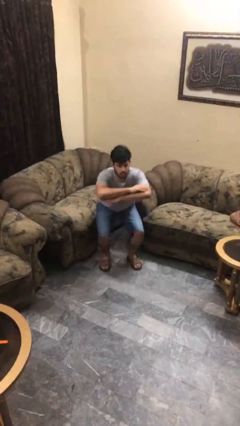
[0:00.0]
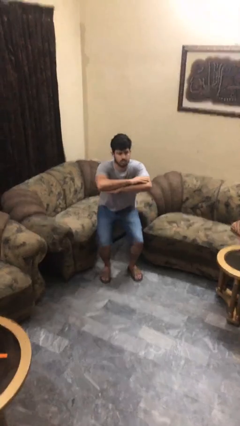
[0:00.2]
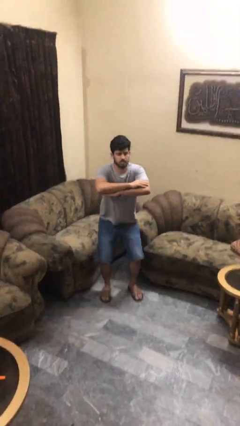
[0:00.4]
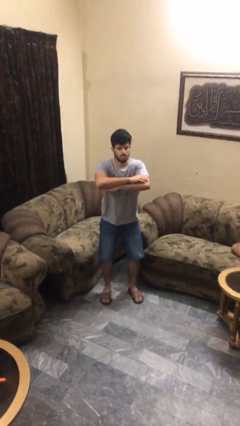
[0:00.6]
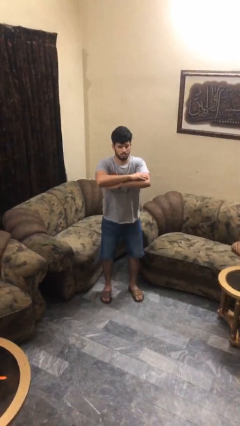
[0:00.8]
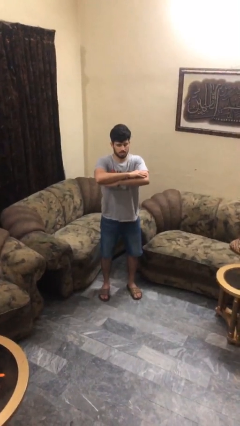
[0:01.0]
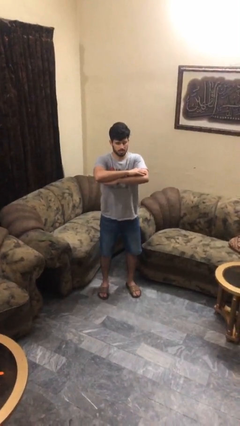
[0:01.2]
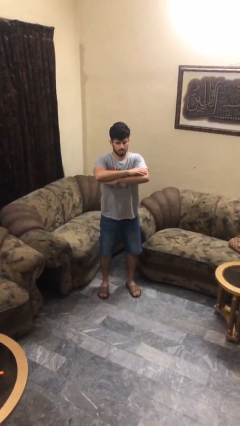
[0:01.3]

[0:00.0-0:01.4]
person stands up

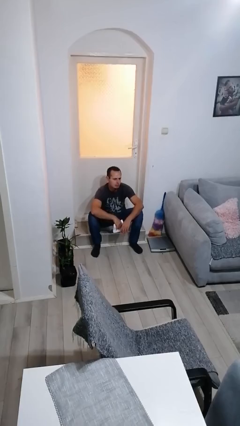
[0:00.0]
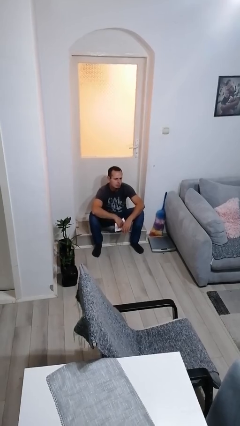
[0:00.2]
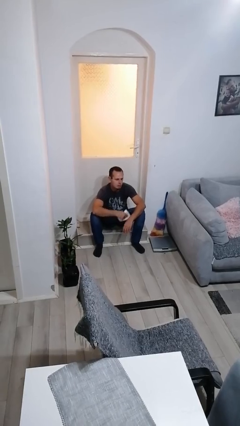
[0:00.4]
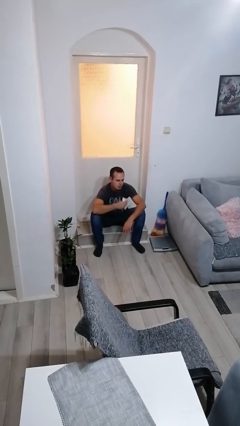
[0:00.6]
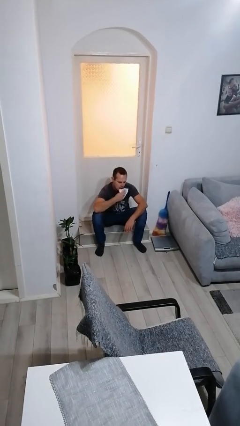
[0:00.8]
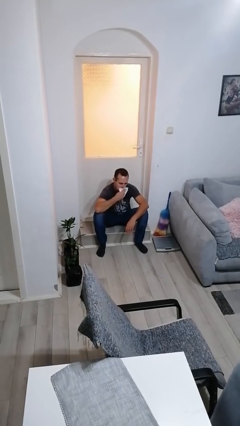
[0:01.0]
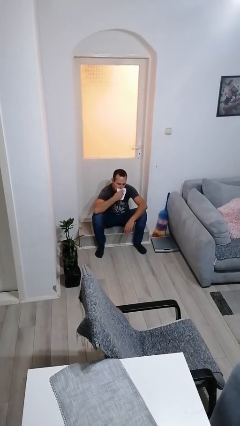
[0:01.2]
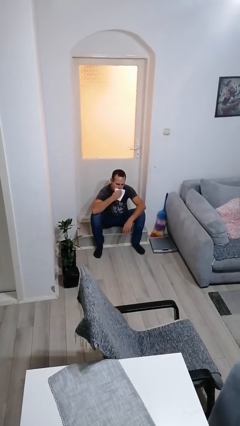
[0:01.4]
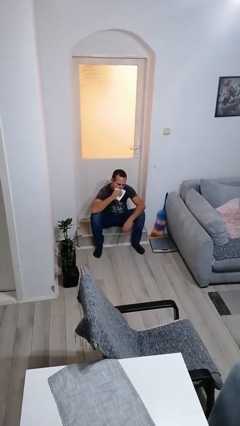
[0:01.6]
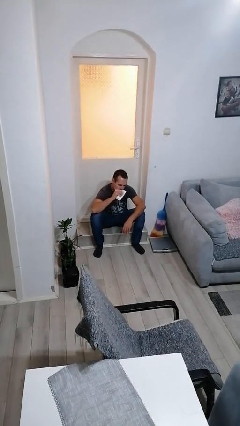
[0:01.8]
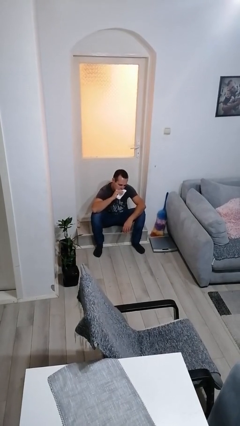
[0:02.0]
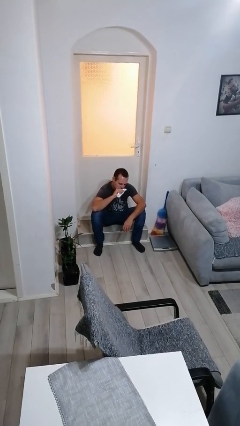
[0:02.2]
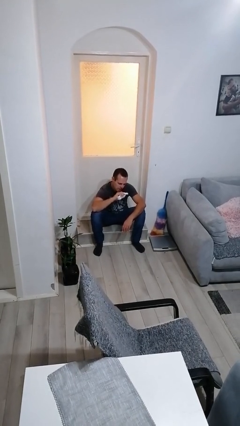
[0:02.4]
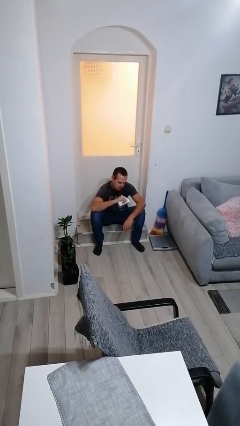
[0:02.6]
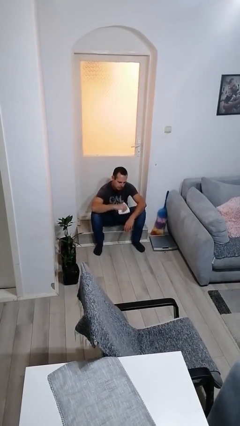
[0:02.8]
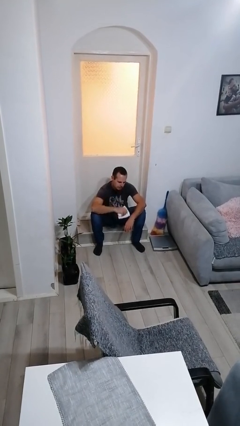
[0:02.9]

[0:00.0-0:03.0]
person wipes mouth with napkin

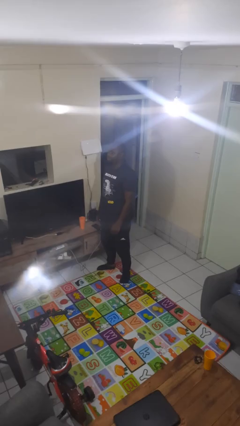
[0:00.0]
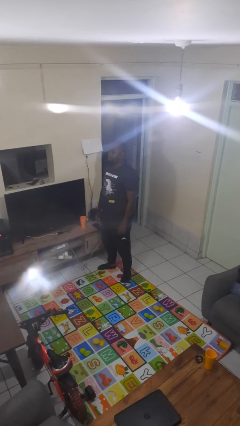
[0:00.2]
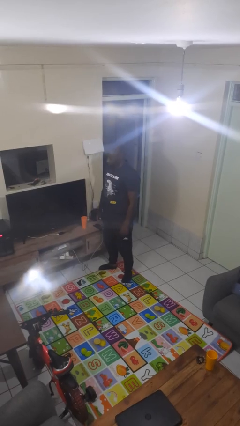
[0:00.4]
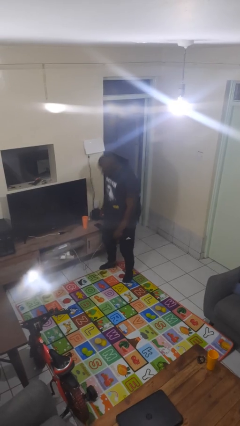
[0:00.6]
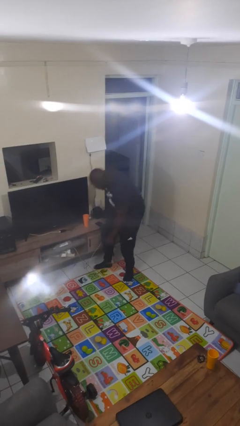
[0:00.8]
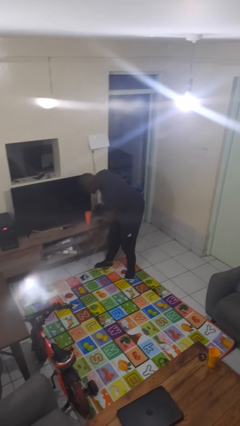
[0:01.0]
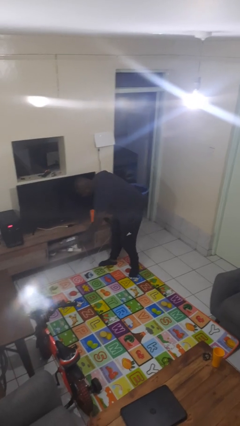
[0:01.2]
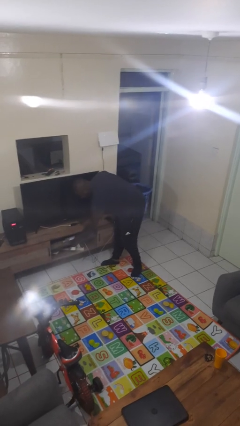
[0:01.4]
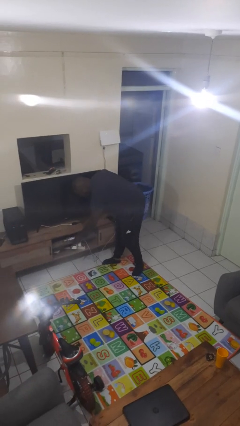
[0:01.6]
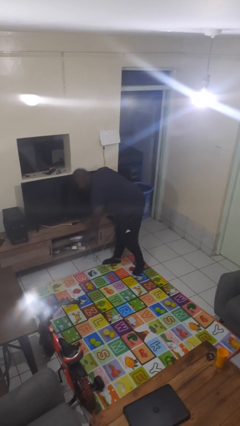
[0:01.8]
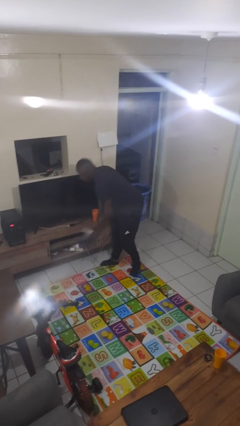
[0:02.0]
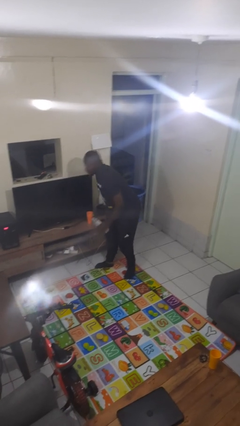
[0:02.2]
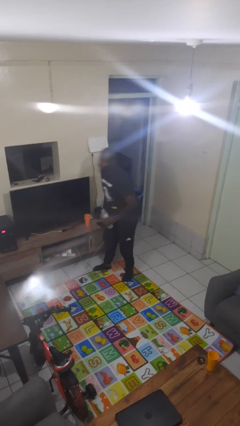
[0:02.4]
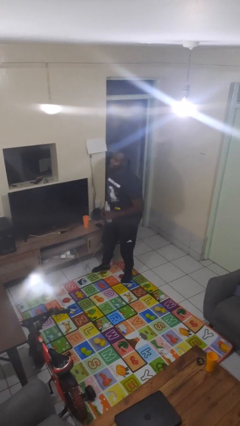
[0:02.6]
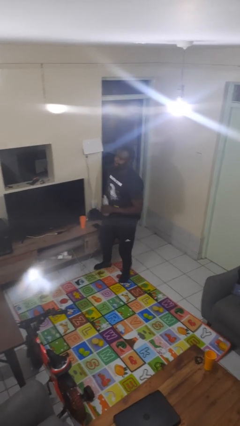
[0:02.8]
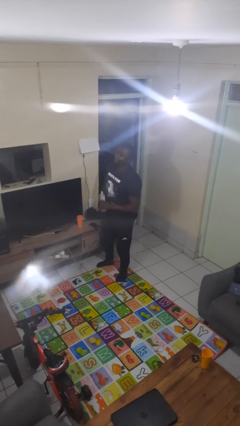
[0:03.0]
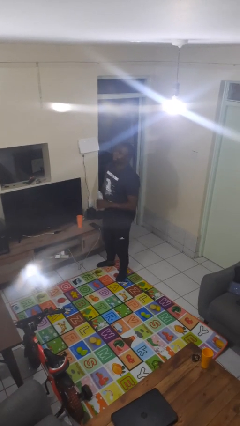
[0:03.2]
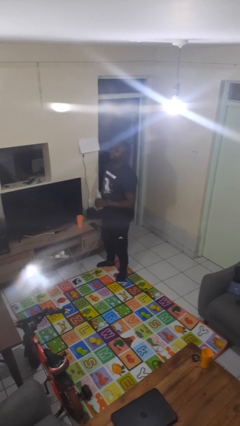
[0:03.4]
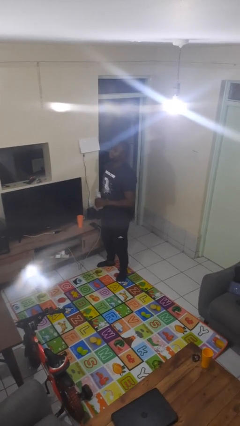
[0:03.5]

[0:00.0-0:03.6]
person picks up object from cabinet

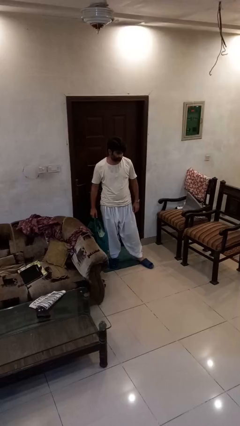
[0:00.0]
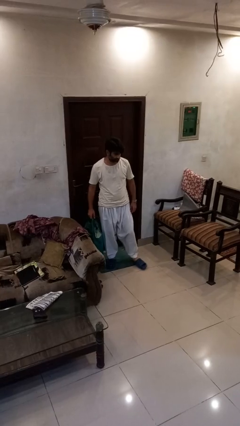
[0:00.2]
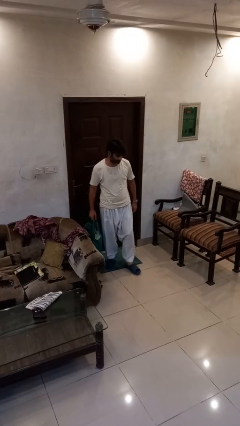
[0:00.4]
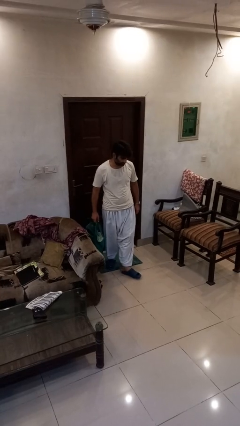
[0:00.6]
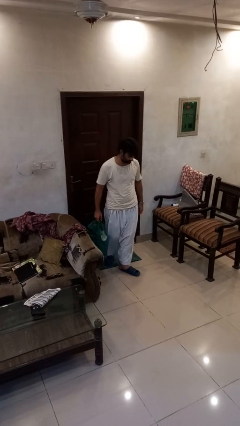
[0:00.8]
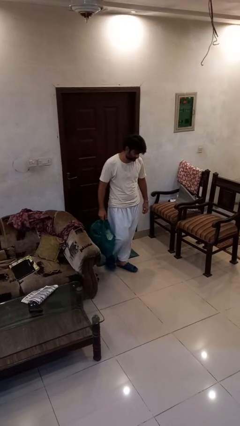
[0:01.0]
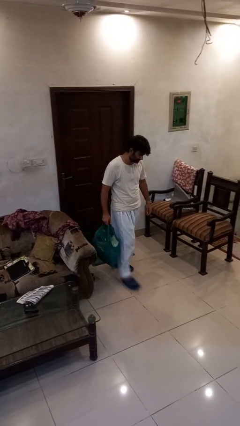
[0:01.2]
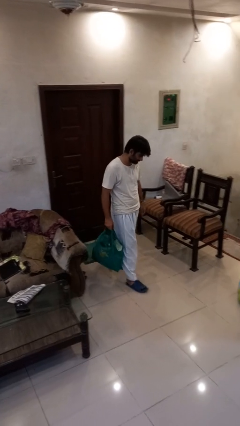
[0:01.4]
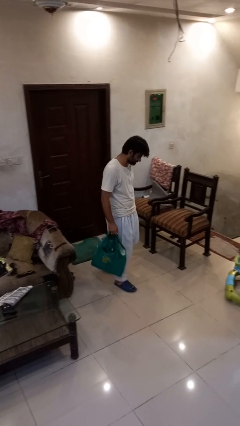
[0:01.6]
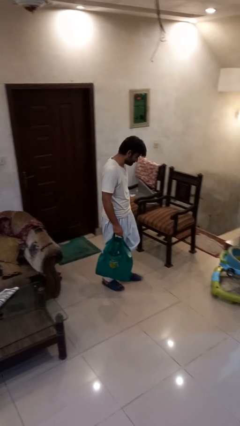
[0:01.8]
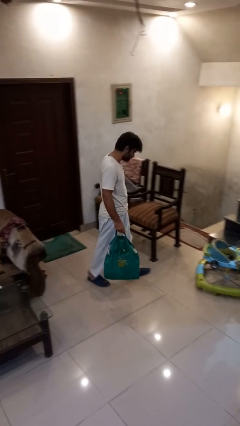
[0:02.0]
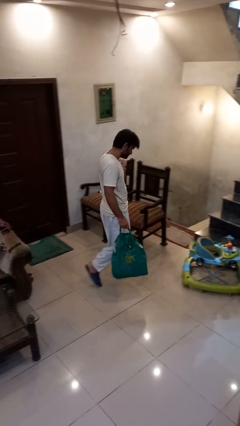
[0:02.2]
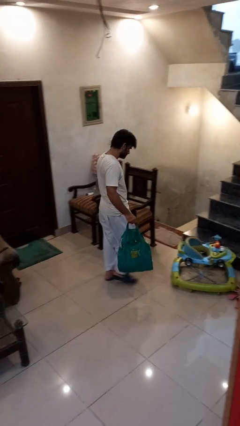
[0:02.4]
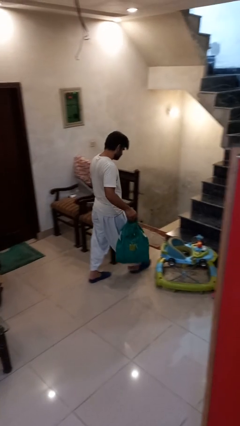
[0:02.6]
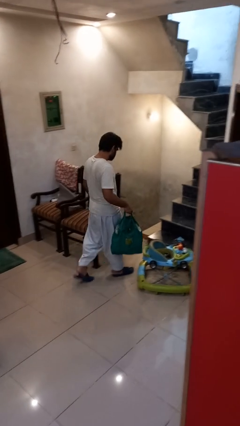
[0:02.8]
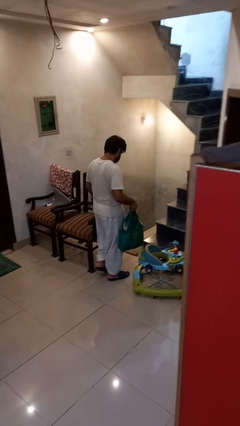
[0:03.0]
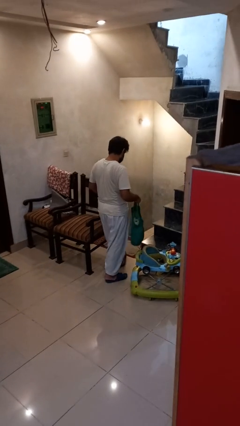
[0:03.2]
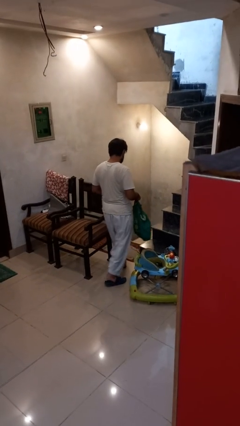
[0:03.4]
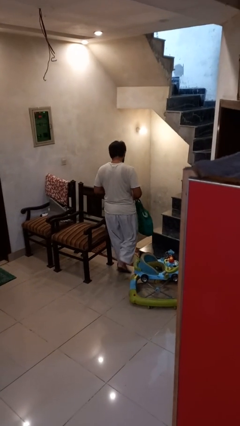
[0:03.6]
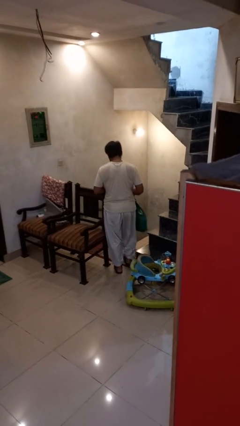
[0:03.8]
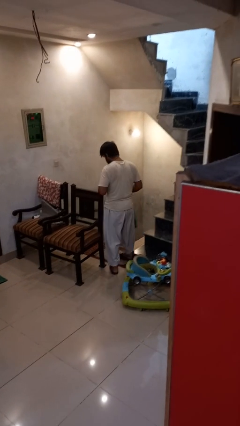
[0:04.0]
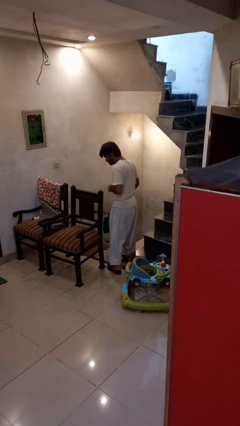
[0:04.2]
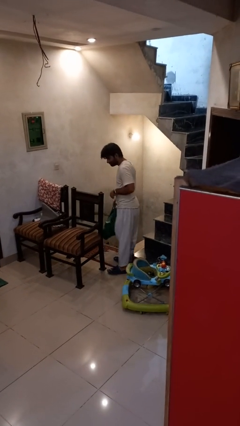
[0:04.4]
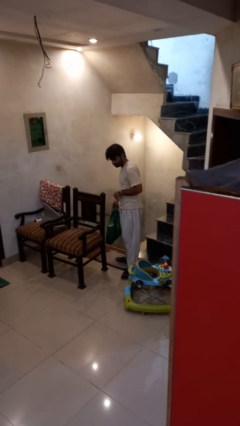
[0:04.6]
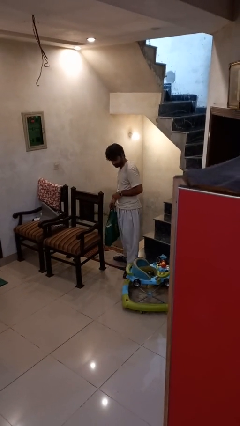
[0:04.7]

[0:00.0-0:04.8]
person carries groceries

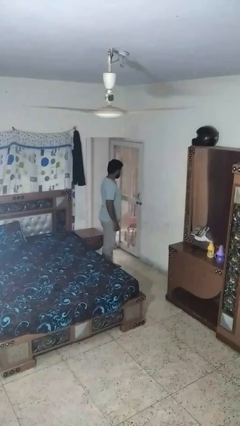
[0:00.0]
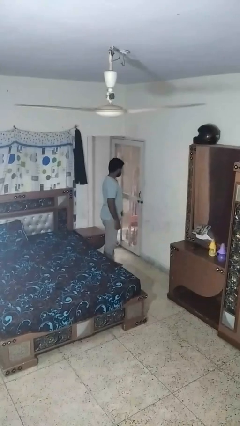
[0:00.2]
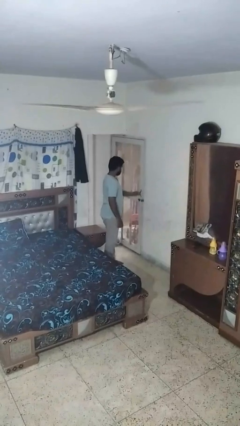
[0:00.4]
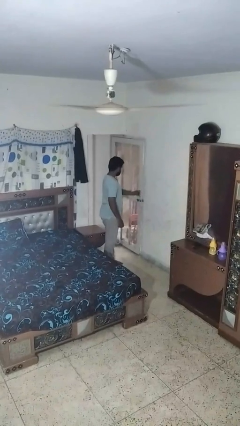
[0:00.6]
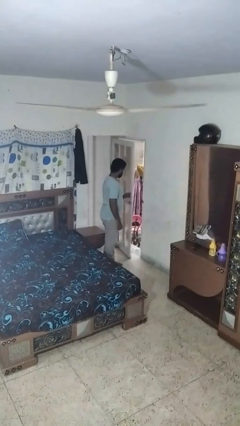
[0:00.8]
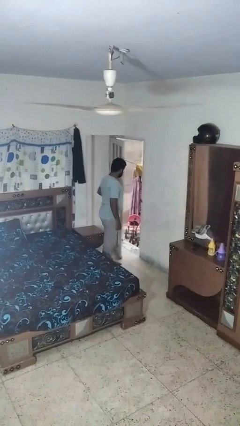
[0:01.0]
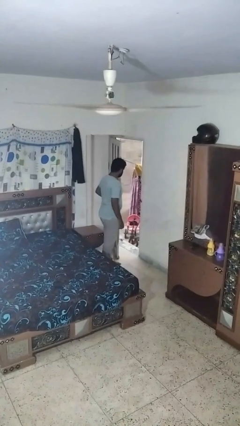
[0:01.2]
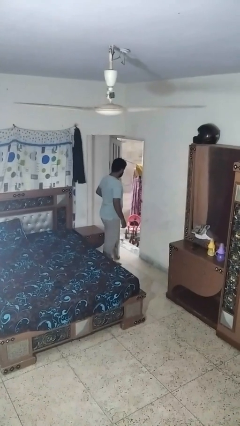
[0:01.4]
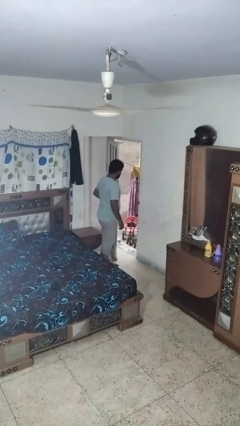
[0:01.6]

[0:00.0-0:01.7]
person opens facility door

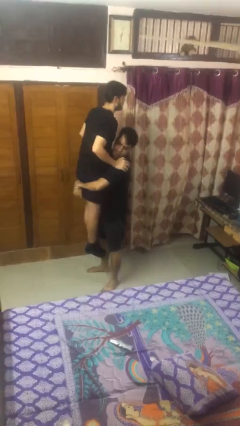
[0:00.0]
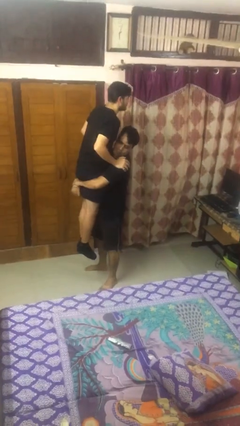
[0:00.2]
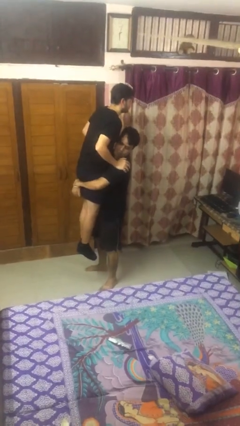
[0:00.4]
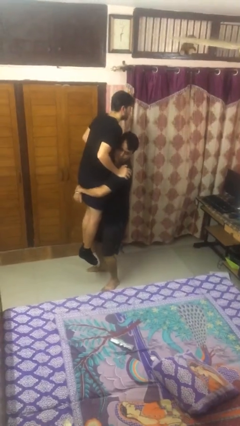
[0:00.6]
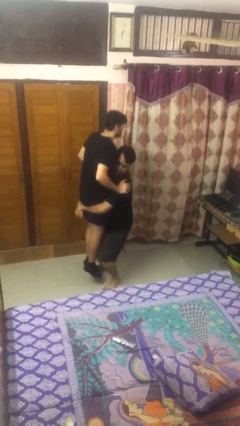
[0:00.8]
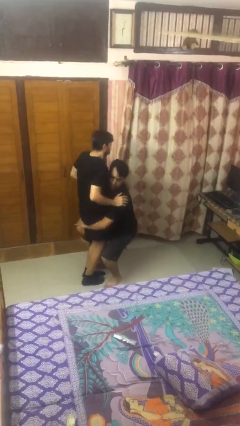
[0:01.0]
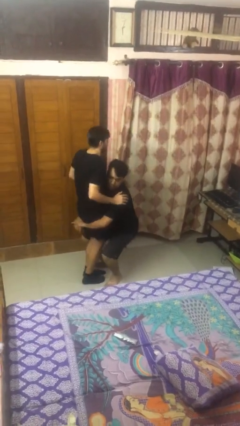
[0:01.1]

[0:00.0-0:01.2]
person puts down person

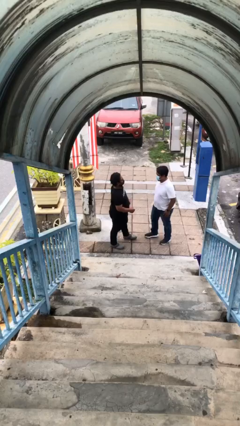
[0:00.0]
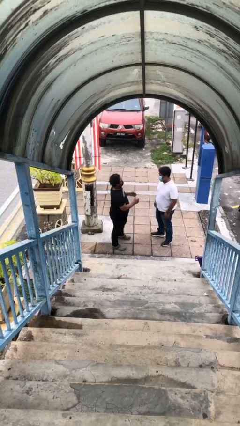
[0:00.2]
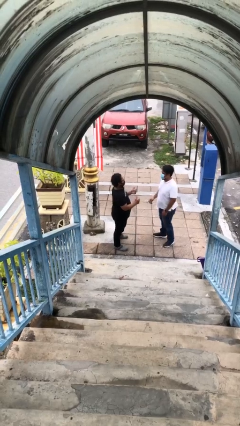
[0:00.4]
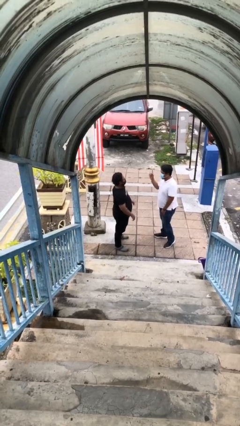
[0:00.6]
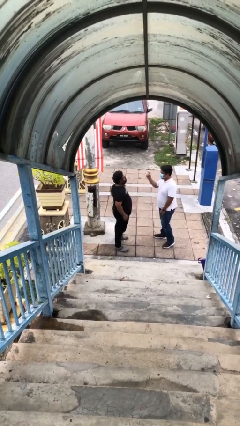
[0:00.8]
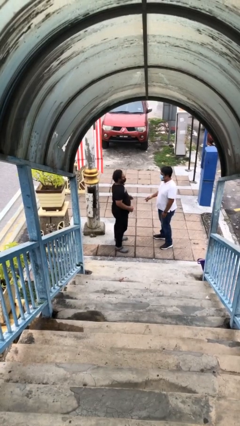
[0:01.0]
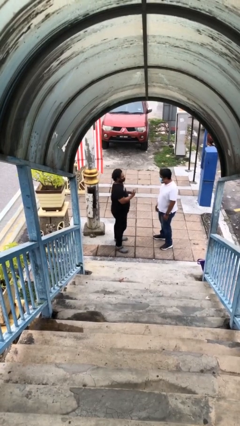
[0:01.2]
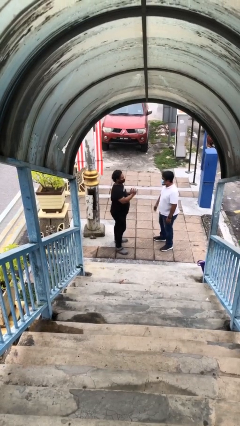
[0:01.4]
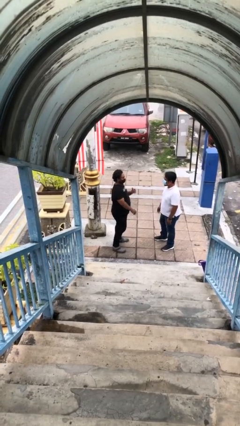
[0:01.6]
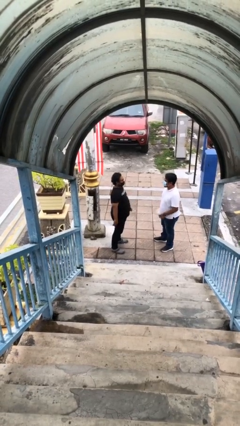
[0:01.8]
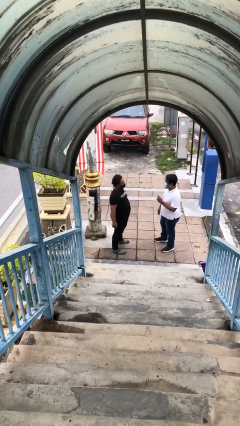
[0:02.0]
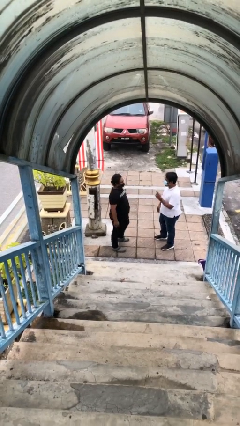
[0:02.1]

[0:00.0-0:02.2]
person talks to person
